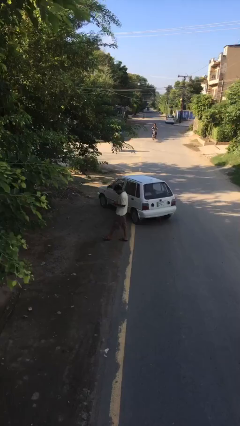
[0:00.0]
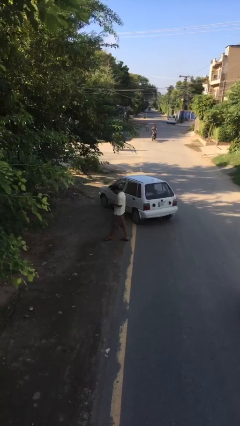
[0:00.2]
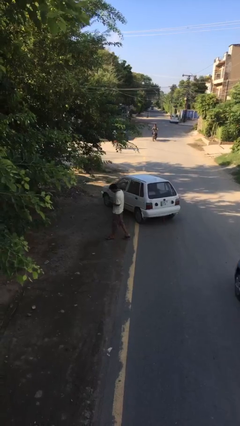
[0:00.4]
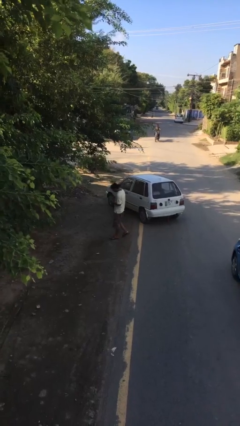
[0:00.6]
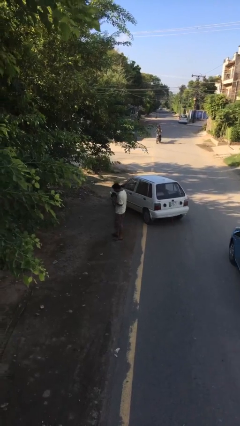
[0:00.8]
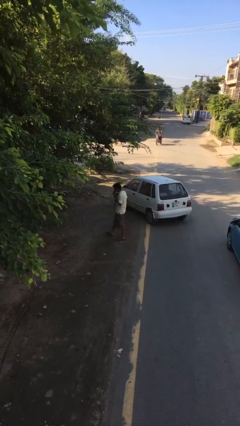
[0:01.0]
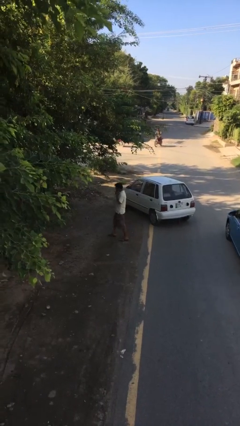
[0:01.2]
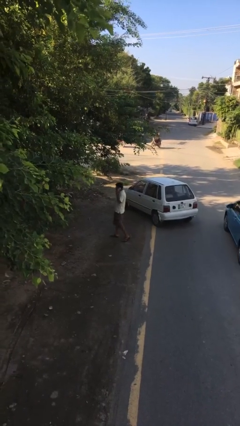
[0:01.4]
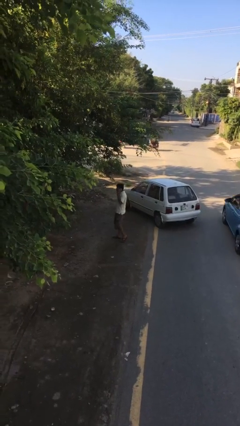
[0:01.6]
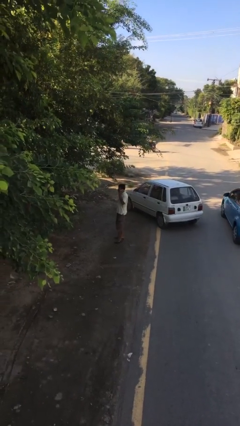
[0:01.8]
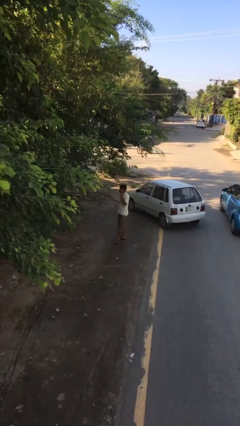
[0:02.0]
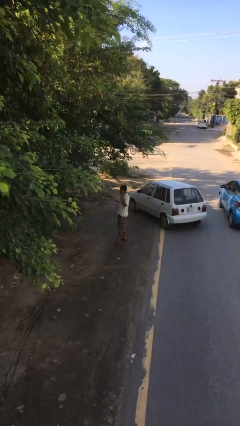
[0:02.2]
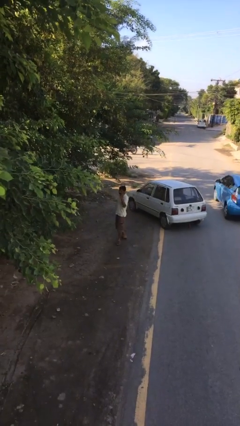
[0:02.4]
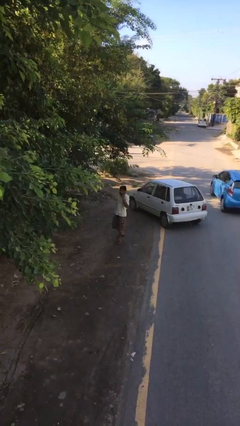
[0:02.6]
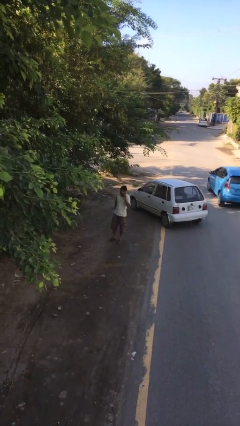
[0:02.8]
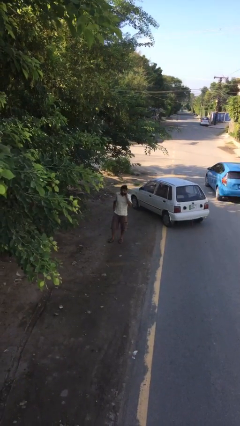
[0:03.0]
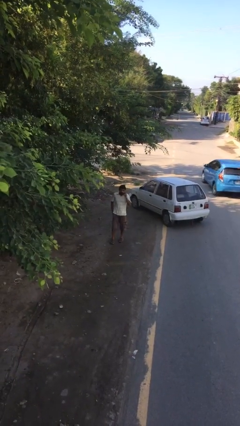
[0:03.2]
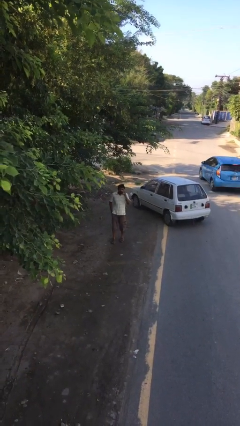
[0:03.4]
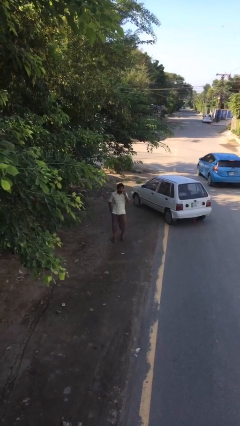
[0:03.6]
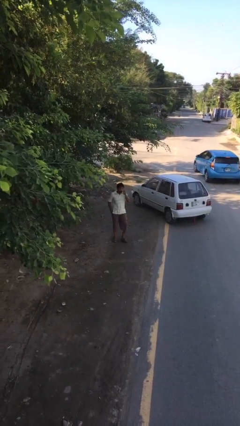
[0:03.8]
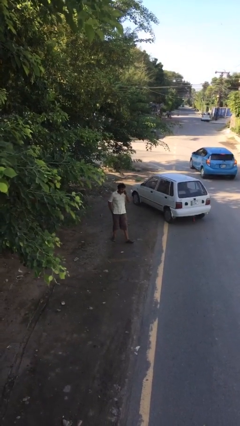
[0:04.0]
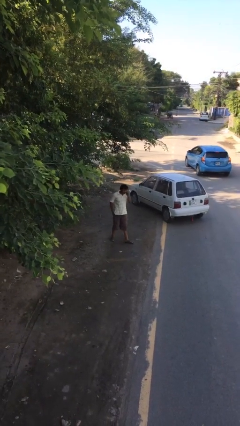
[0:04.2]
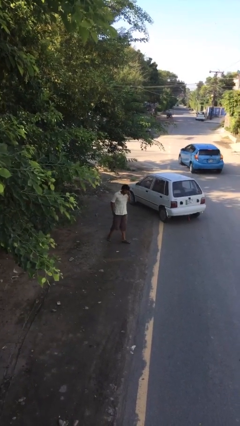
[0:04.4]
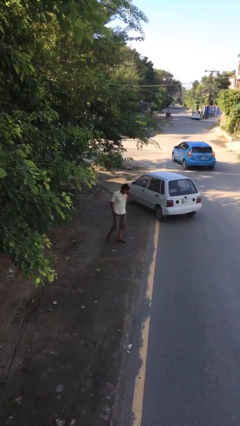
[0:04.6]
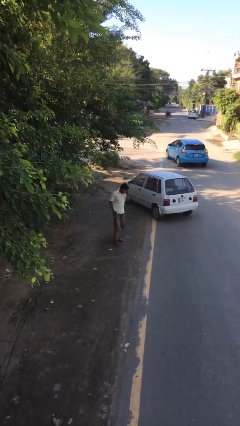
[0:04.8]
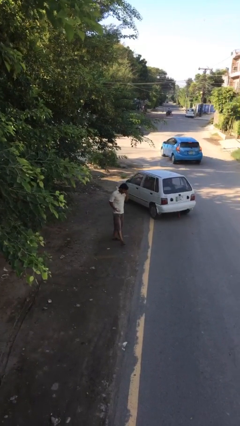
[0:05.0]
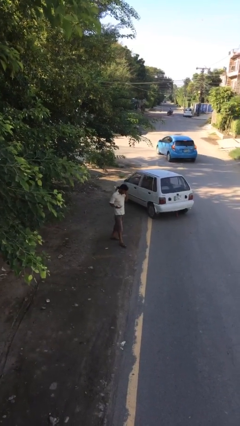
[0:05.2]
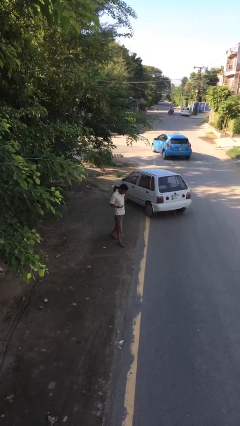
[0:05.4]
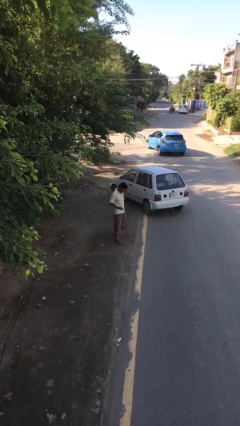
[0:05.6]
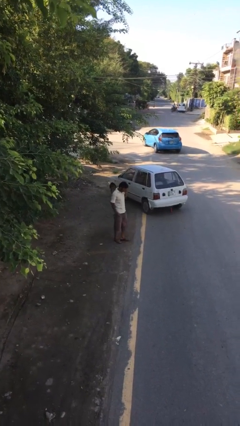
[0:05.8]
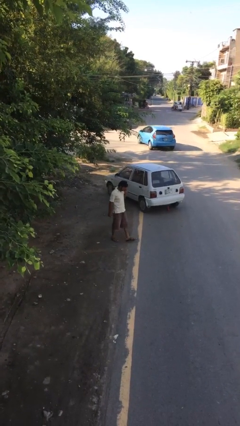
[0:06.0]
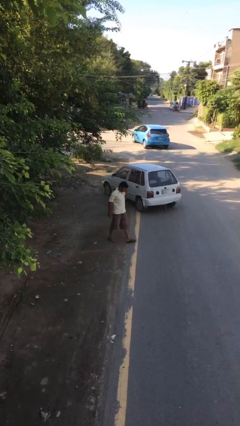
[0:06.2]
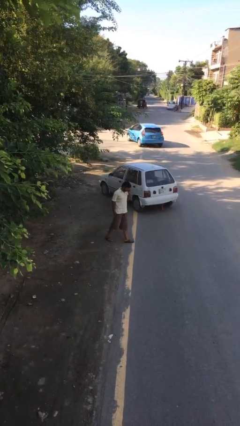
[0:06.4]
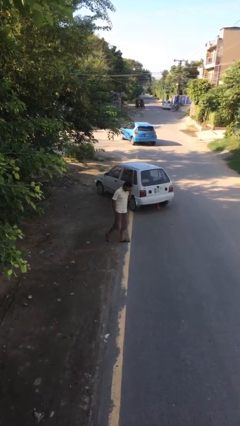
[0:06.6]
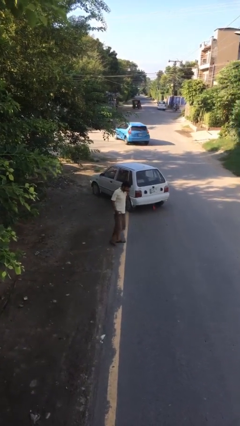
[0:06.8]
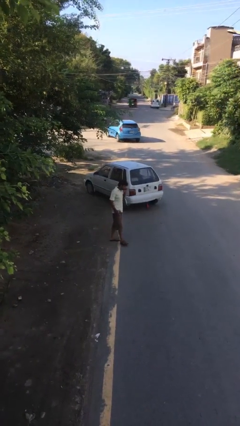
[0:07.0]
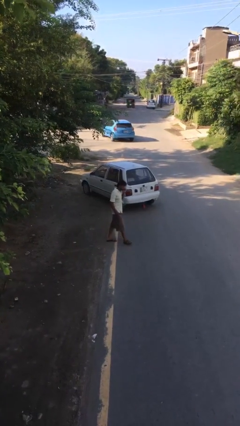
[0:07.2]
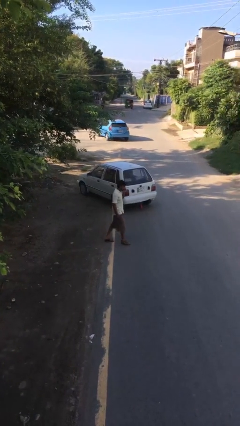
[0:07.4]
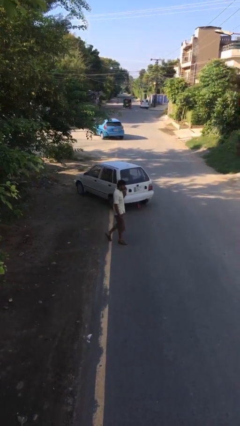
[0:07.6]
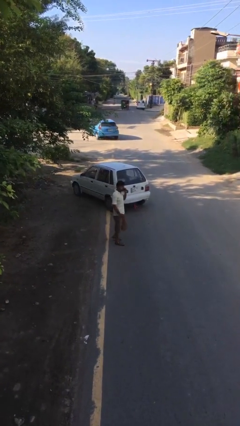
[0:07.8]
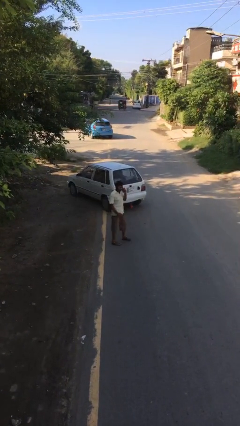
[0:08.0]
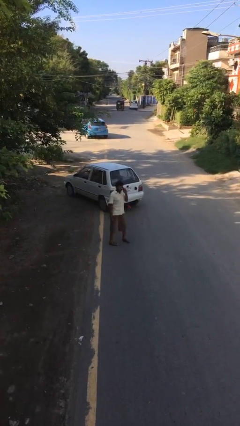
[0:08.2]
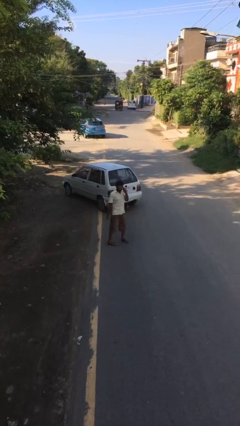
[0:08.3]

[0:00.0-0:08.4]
person talks on phone

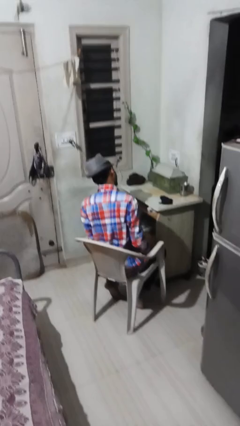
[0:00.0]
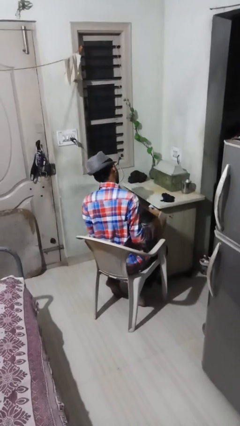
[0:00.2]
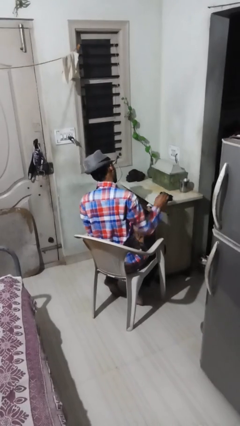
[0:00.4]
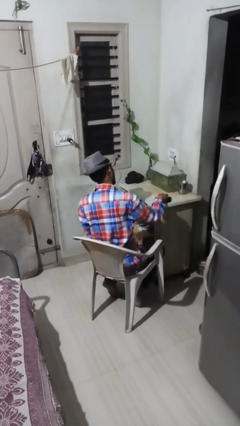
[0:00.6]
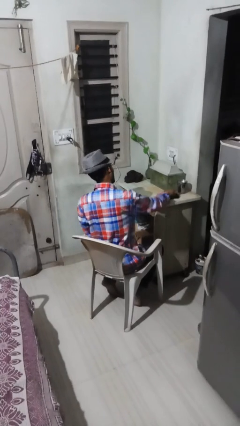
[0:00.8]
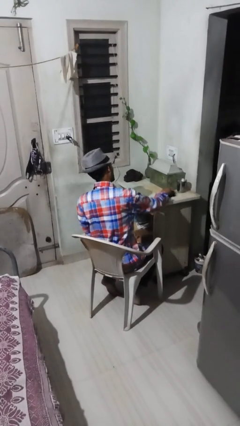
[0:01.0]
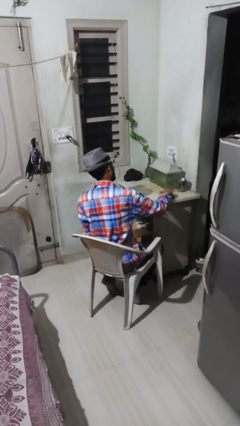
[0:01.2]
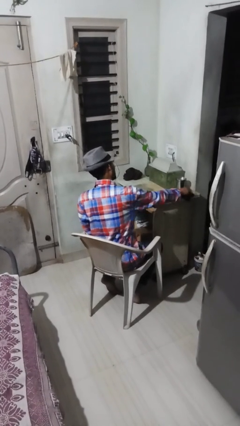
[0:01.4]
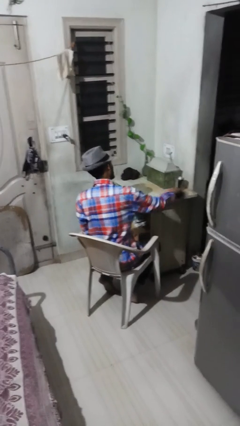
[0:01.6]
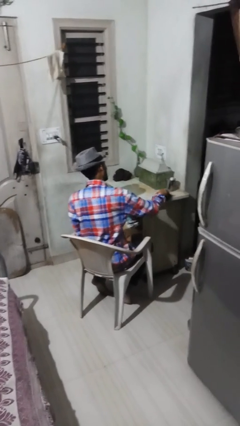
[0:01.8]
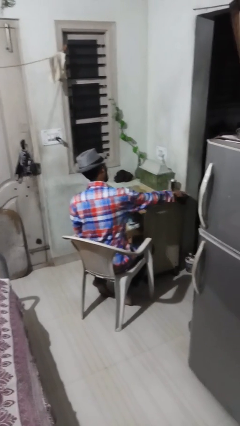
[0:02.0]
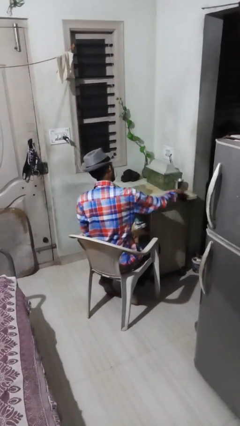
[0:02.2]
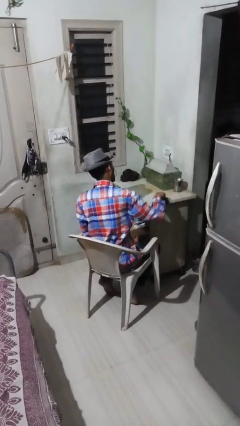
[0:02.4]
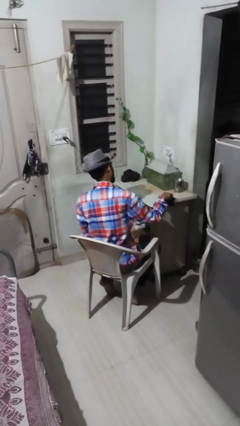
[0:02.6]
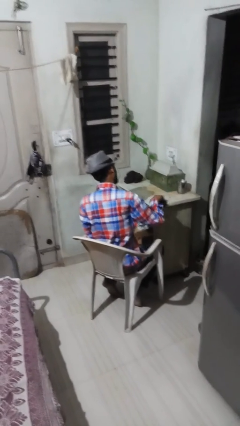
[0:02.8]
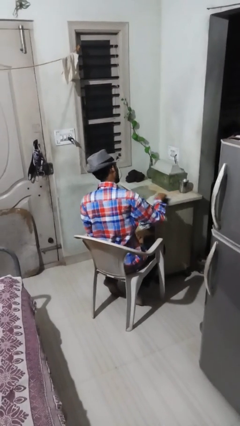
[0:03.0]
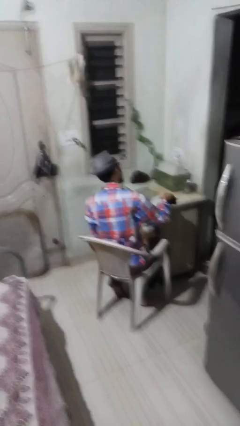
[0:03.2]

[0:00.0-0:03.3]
person cleans table with rag

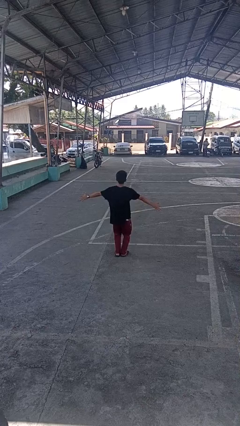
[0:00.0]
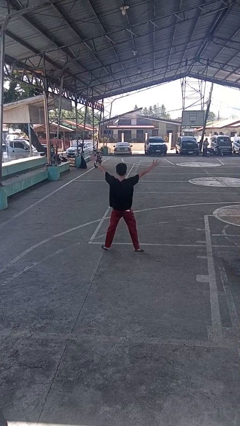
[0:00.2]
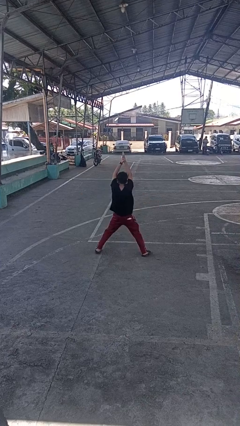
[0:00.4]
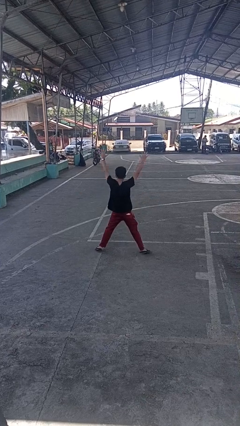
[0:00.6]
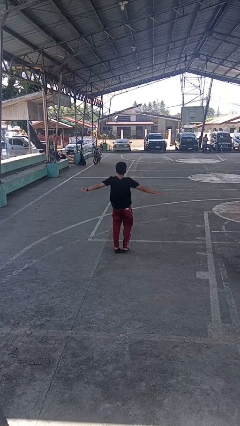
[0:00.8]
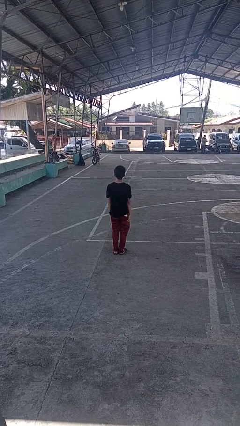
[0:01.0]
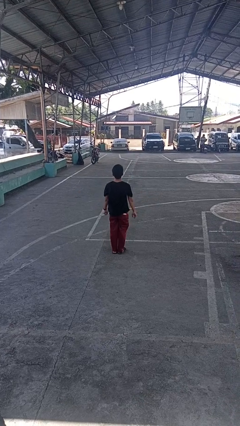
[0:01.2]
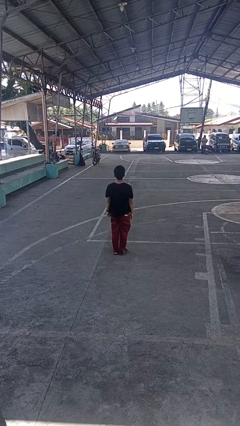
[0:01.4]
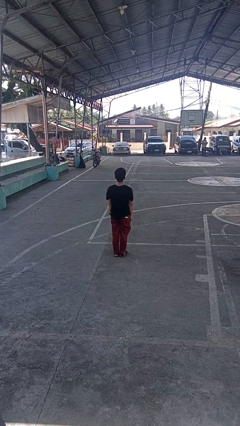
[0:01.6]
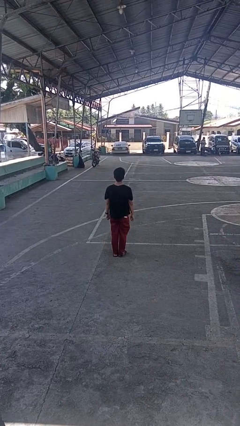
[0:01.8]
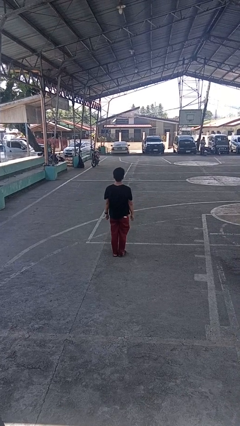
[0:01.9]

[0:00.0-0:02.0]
person exercises with jumping jacks

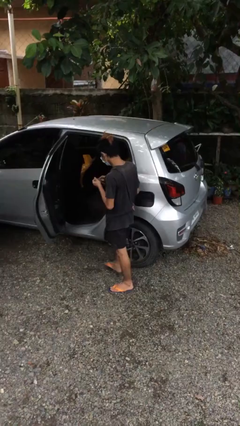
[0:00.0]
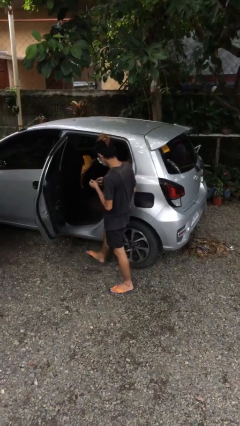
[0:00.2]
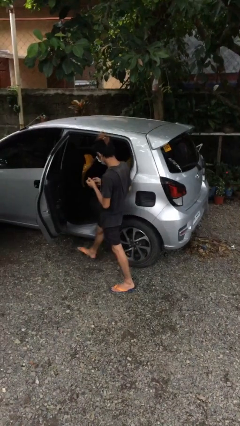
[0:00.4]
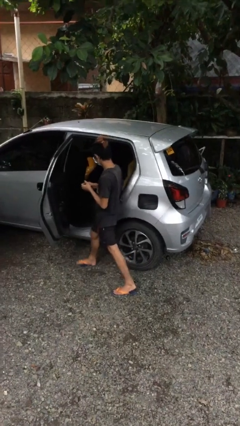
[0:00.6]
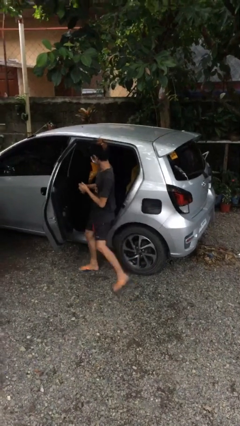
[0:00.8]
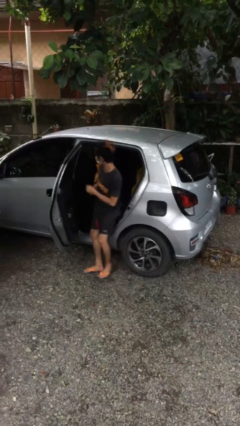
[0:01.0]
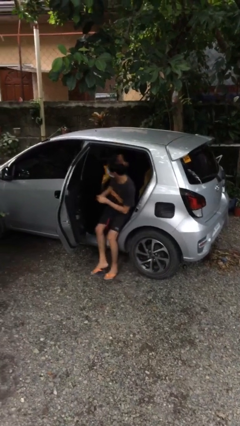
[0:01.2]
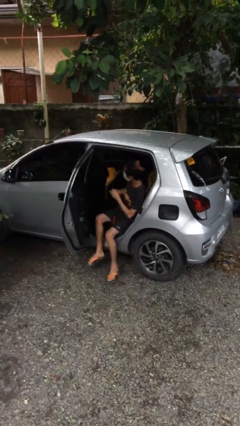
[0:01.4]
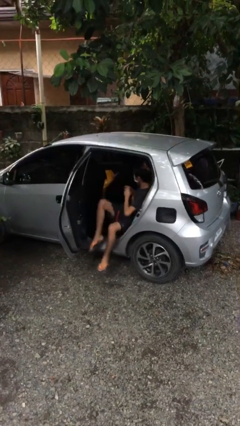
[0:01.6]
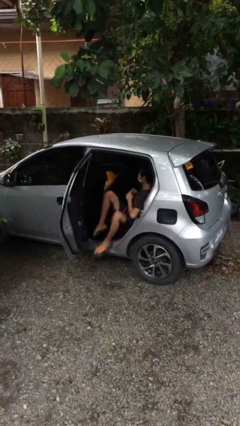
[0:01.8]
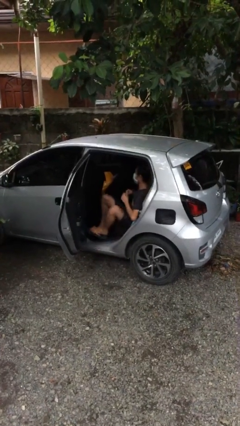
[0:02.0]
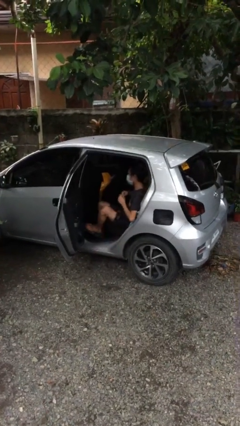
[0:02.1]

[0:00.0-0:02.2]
person enters car

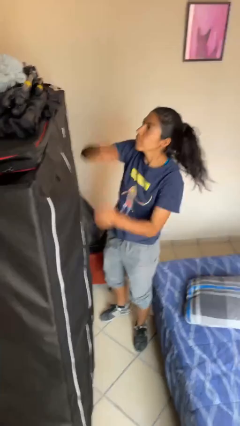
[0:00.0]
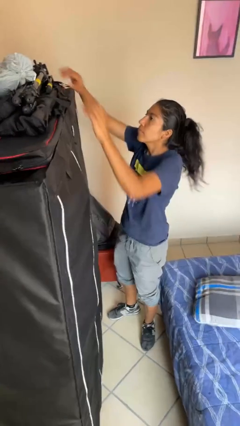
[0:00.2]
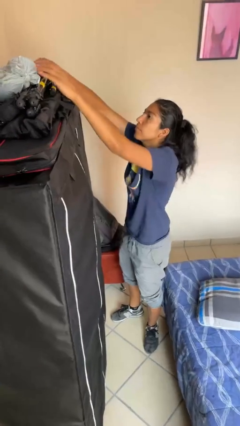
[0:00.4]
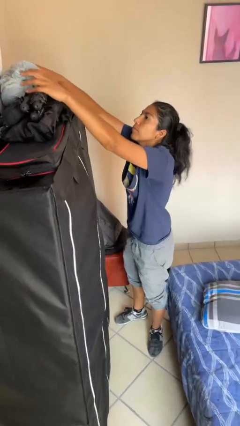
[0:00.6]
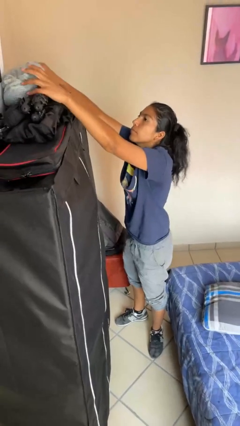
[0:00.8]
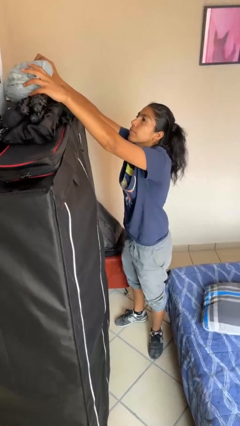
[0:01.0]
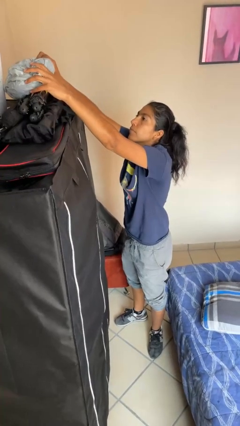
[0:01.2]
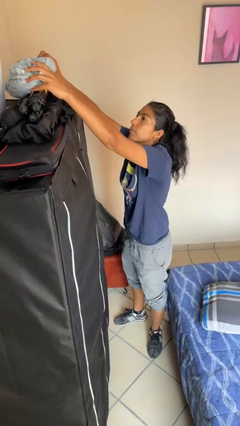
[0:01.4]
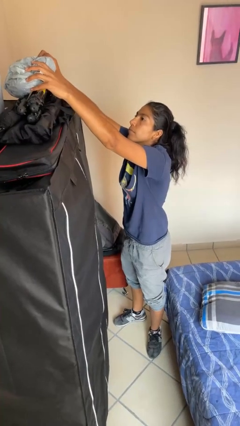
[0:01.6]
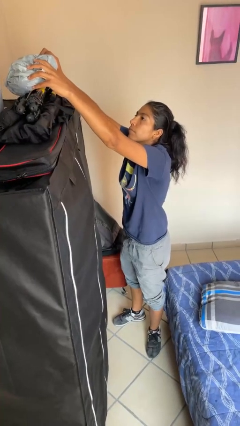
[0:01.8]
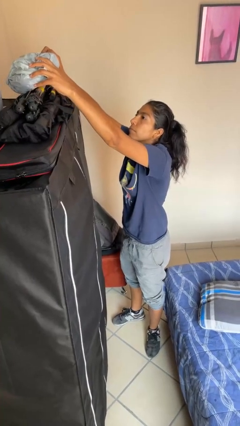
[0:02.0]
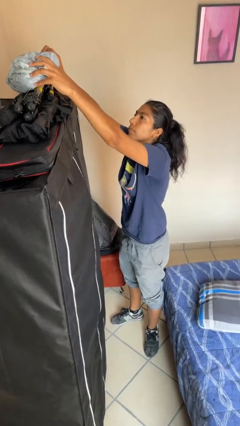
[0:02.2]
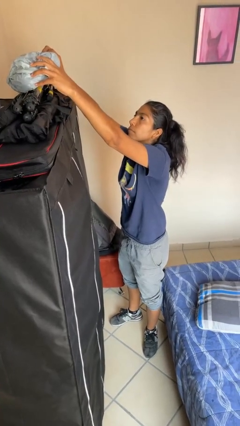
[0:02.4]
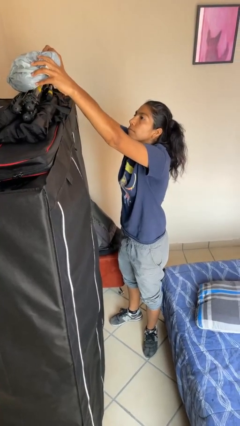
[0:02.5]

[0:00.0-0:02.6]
person picks up object from shelf
